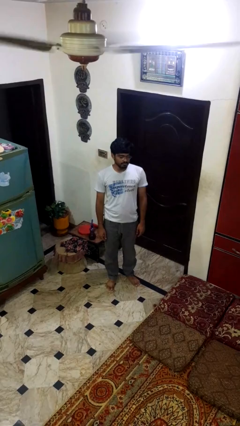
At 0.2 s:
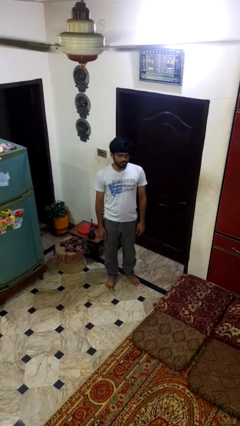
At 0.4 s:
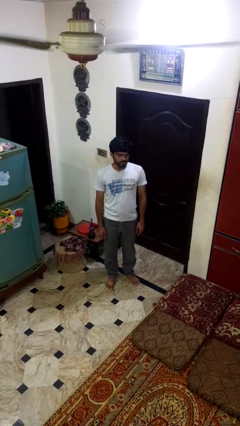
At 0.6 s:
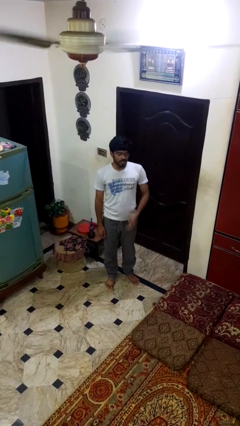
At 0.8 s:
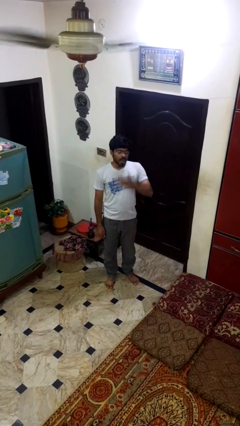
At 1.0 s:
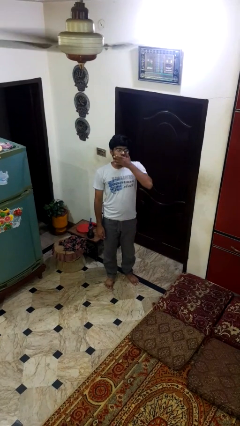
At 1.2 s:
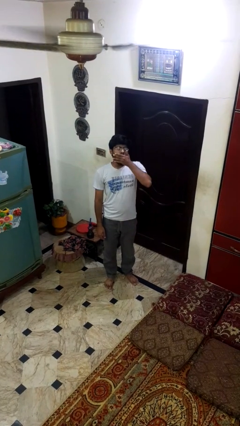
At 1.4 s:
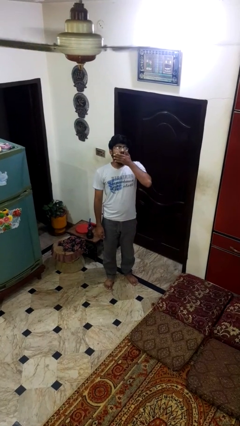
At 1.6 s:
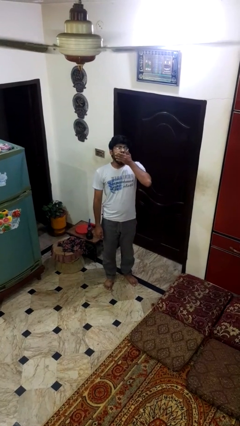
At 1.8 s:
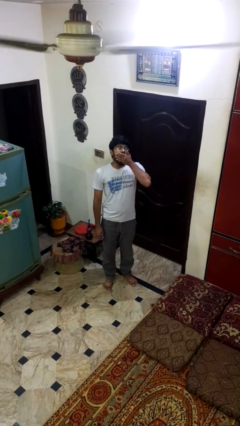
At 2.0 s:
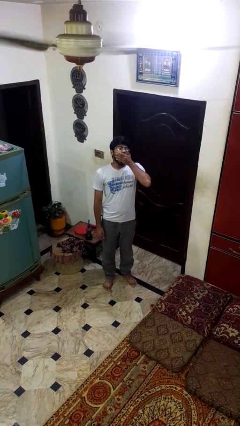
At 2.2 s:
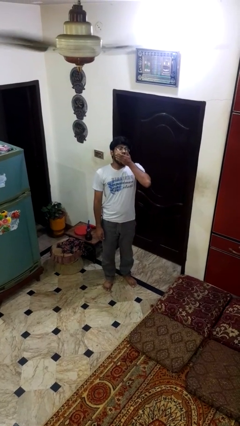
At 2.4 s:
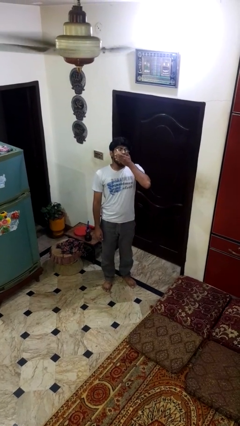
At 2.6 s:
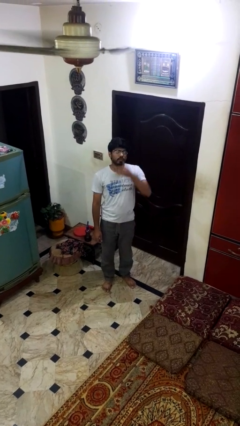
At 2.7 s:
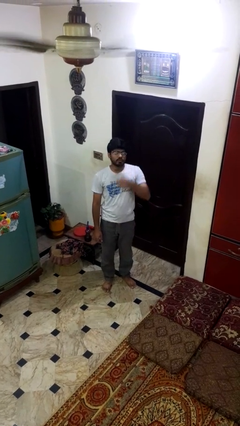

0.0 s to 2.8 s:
person yawns

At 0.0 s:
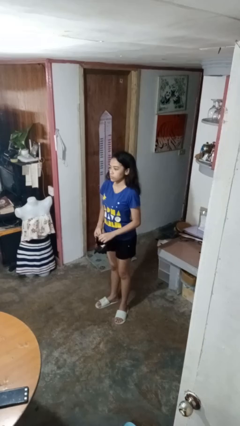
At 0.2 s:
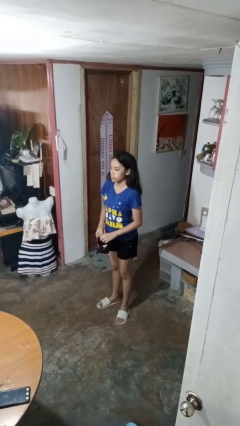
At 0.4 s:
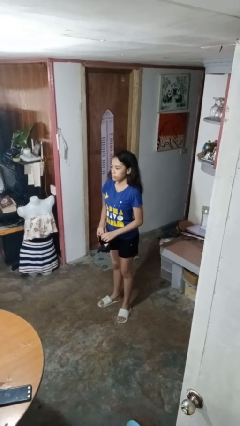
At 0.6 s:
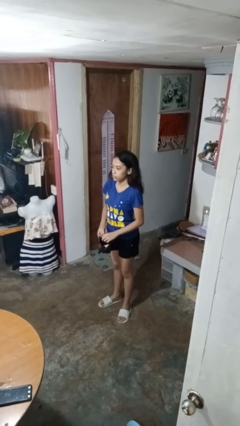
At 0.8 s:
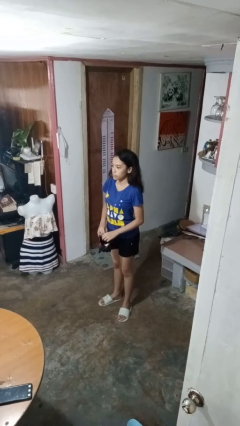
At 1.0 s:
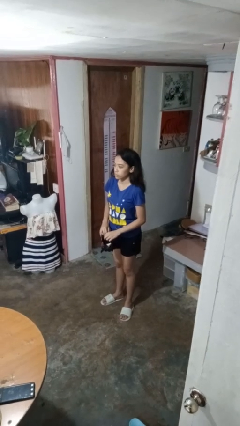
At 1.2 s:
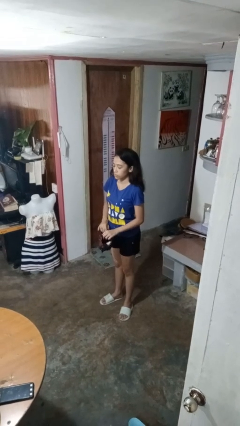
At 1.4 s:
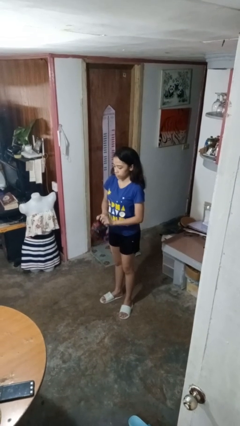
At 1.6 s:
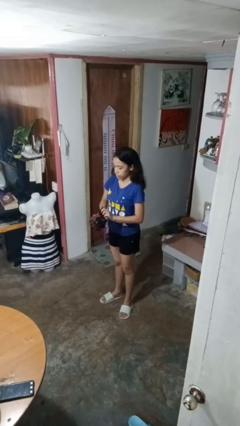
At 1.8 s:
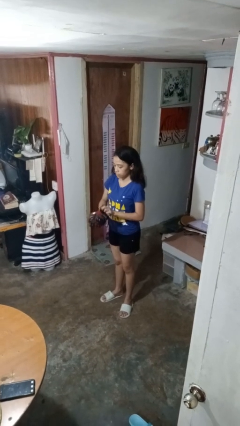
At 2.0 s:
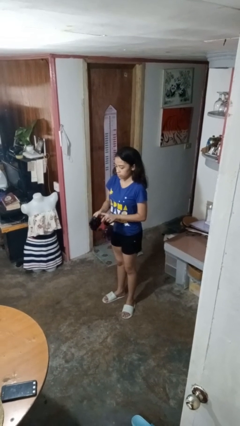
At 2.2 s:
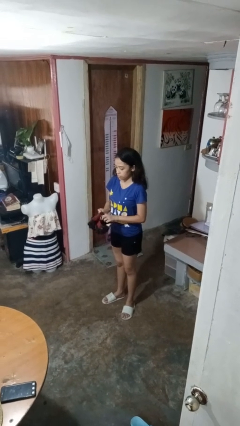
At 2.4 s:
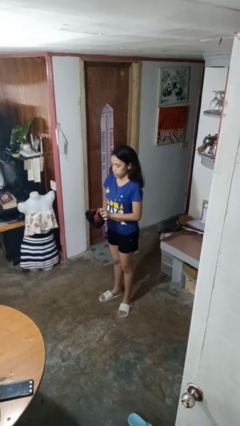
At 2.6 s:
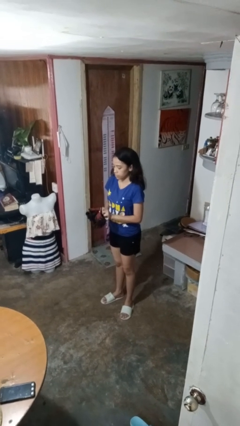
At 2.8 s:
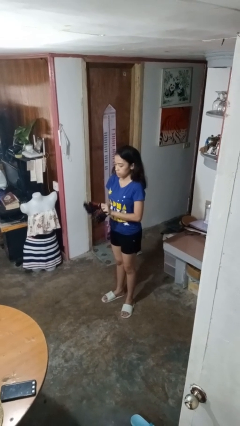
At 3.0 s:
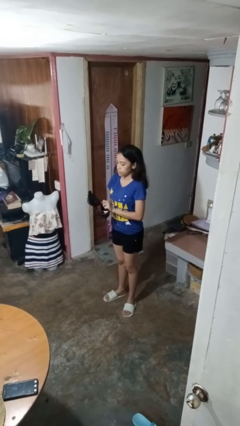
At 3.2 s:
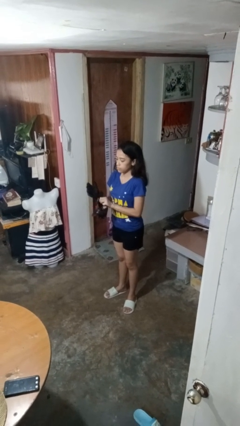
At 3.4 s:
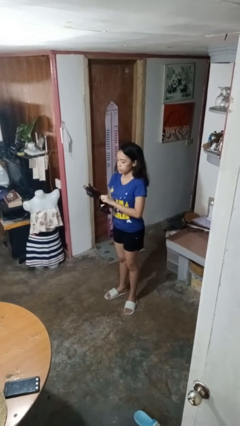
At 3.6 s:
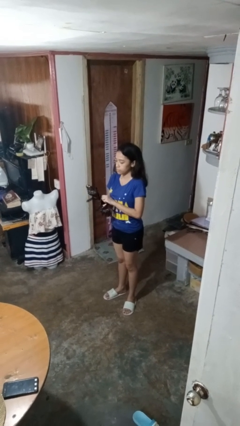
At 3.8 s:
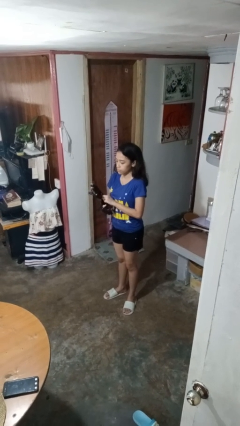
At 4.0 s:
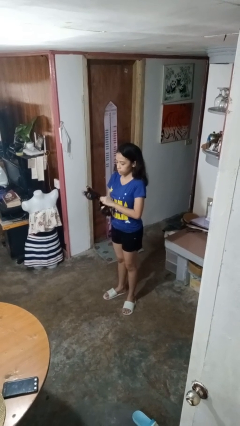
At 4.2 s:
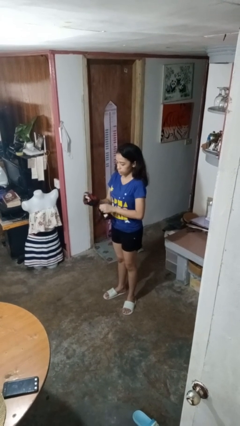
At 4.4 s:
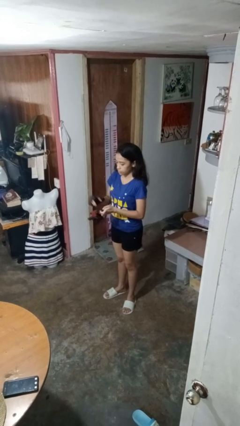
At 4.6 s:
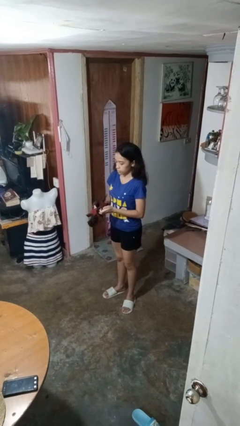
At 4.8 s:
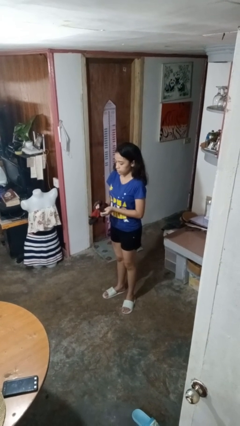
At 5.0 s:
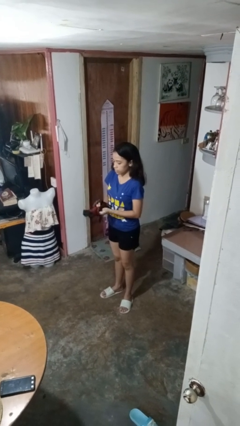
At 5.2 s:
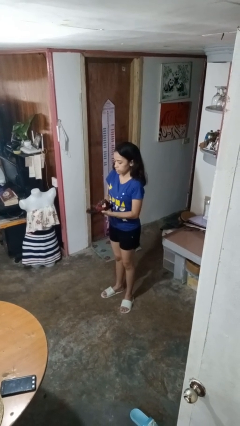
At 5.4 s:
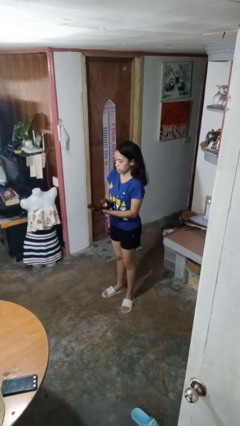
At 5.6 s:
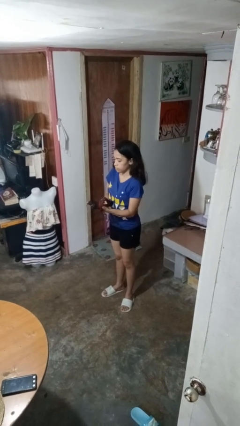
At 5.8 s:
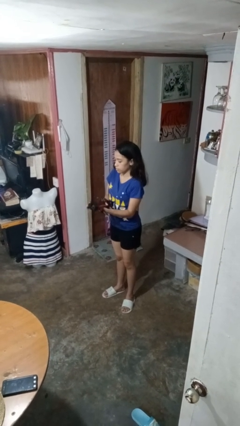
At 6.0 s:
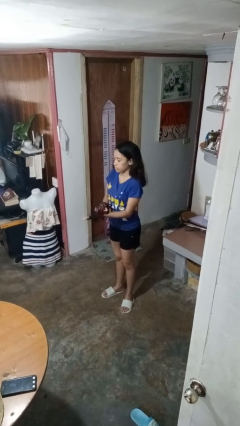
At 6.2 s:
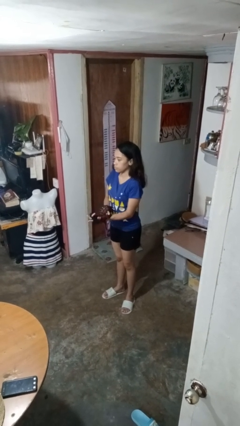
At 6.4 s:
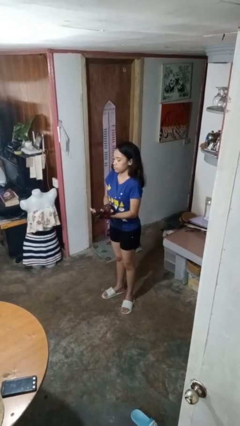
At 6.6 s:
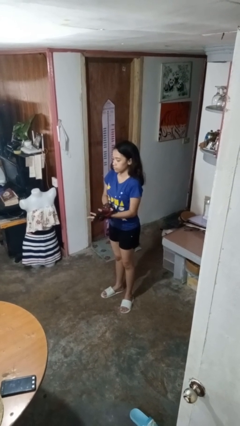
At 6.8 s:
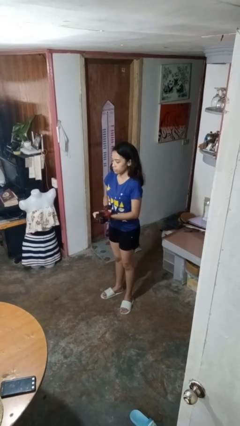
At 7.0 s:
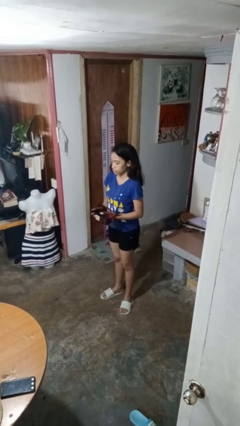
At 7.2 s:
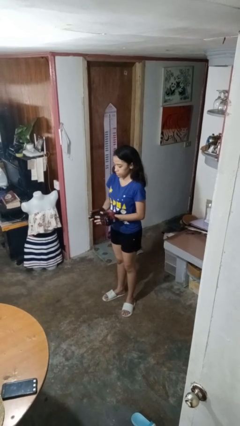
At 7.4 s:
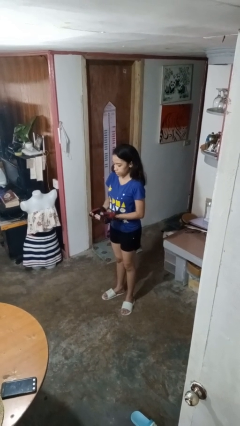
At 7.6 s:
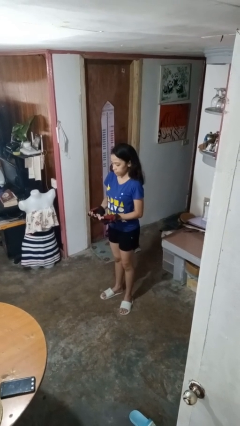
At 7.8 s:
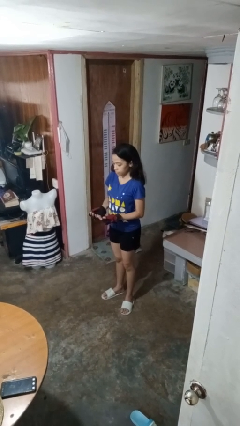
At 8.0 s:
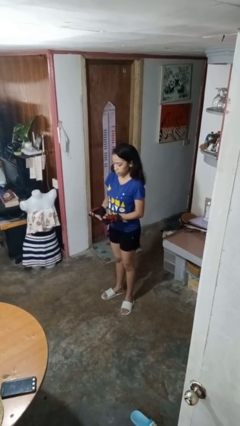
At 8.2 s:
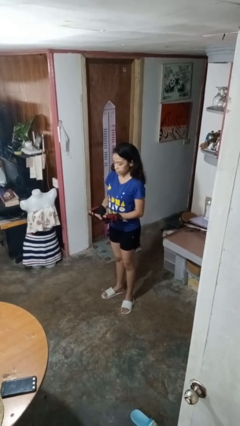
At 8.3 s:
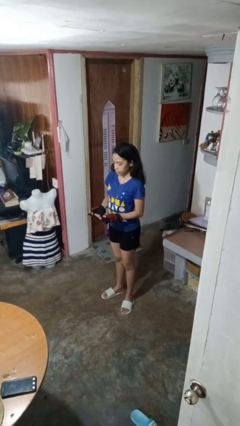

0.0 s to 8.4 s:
person puts on gloves

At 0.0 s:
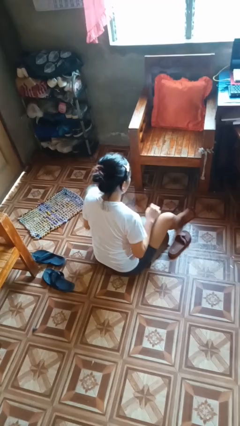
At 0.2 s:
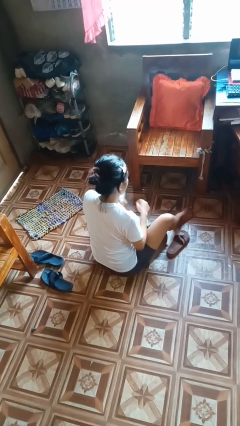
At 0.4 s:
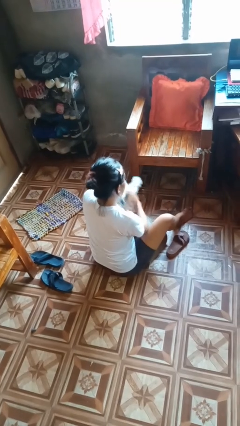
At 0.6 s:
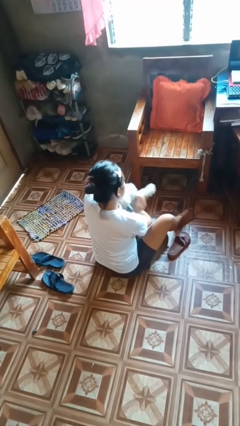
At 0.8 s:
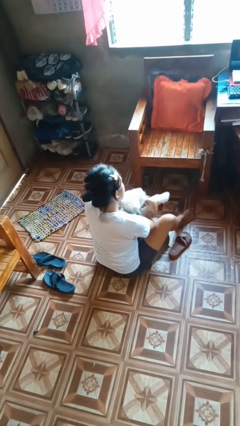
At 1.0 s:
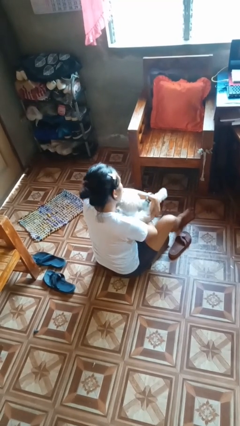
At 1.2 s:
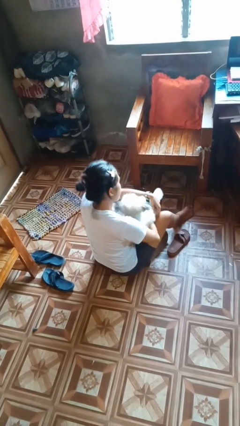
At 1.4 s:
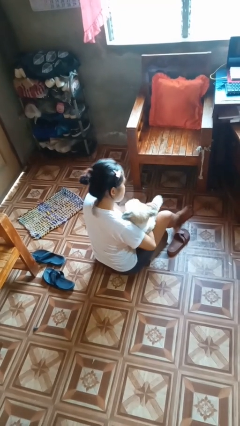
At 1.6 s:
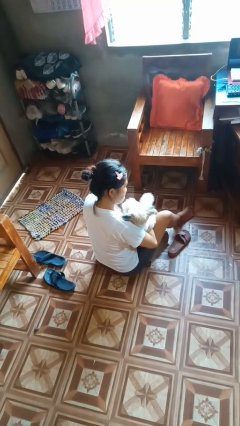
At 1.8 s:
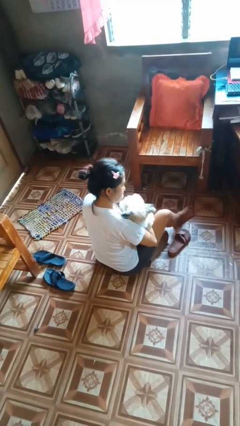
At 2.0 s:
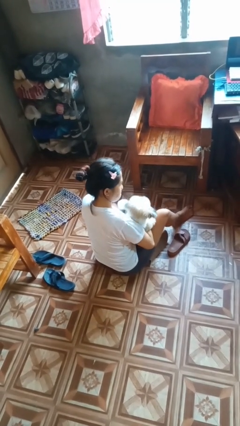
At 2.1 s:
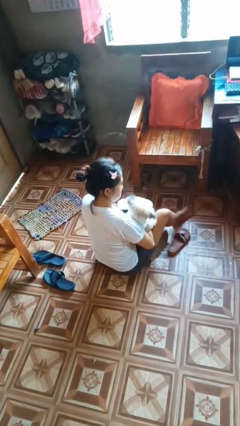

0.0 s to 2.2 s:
person hugs dog

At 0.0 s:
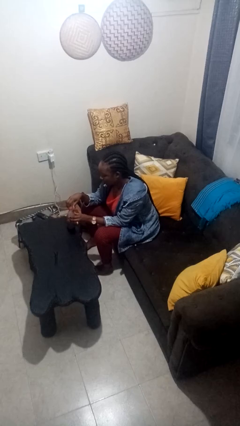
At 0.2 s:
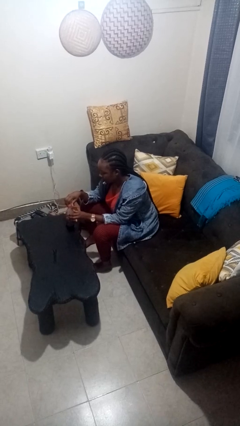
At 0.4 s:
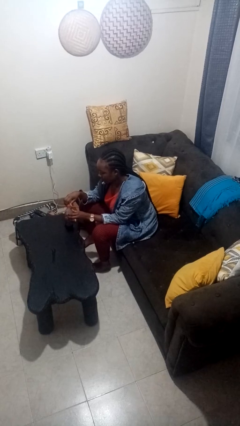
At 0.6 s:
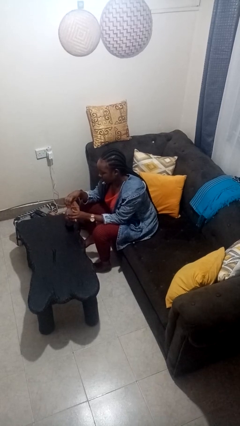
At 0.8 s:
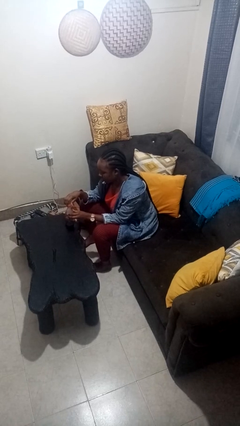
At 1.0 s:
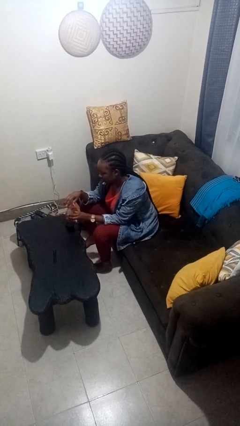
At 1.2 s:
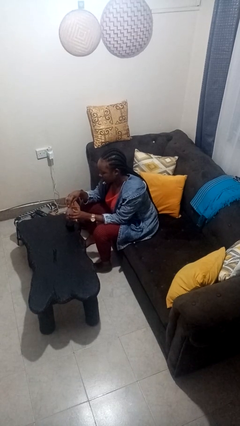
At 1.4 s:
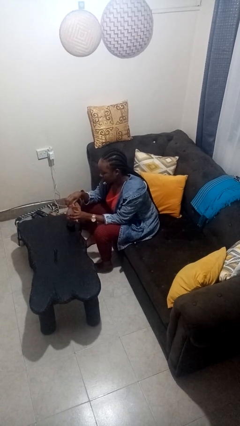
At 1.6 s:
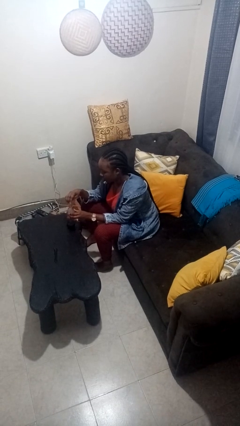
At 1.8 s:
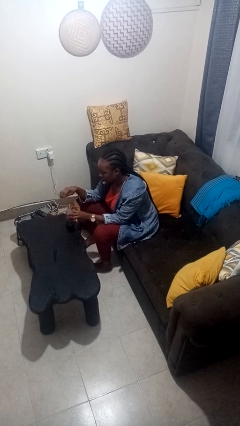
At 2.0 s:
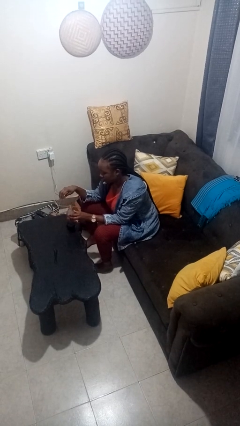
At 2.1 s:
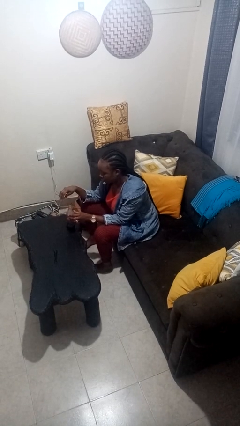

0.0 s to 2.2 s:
person unscrews lid from bottle

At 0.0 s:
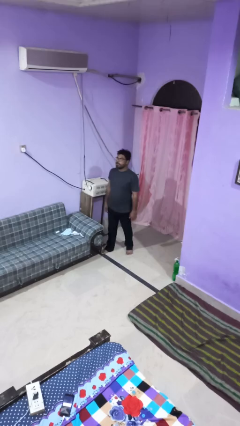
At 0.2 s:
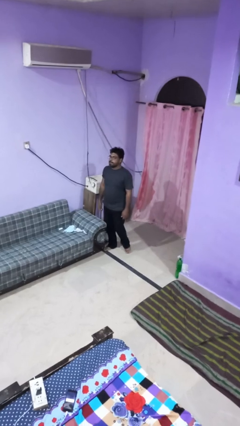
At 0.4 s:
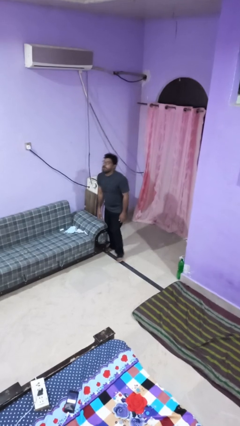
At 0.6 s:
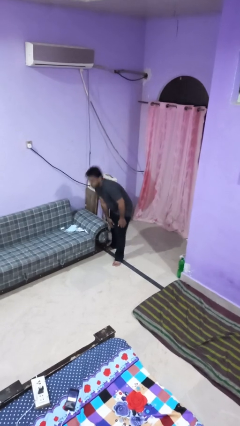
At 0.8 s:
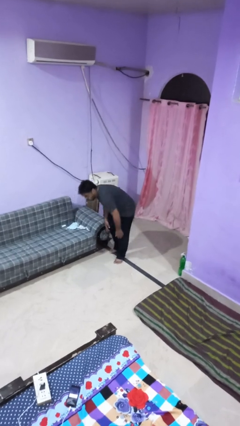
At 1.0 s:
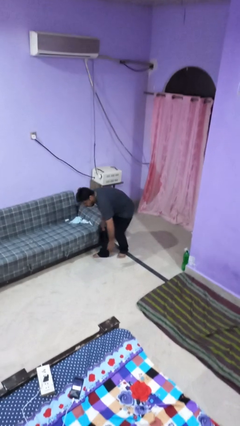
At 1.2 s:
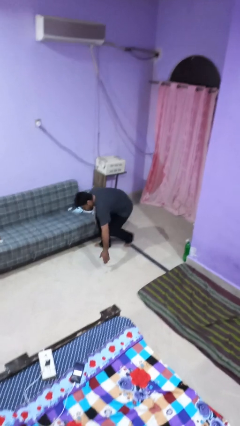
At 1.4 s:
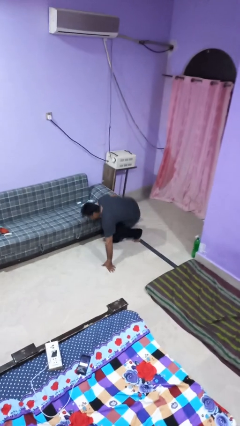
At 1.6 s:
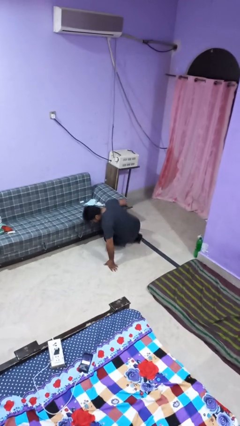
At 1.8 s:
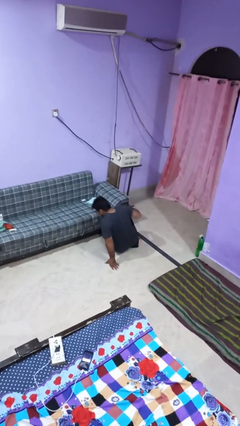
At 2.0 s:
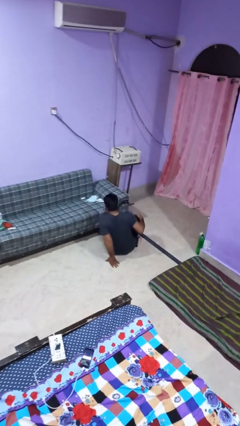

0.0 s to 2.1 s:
person trips on object on floor
